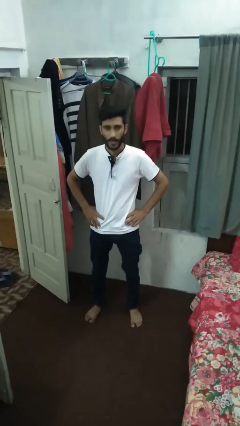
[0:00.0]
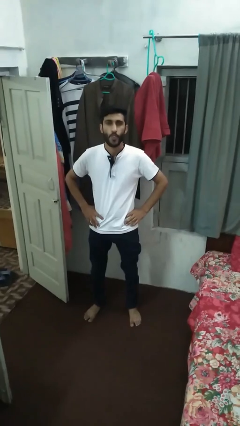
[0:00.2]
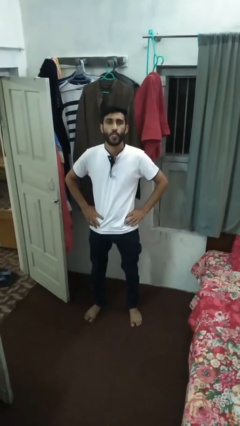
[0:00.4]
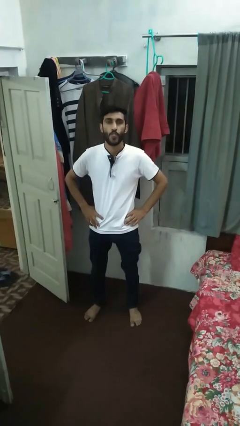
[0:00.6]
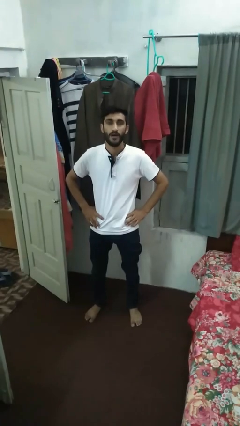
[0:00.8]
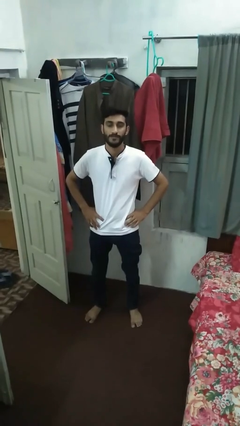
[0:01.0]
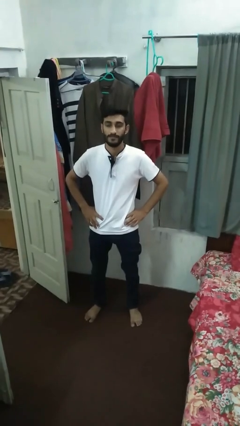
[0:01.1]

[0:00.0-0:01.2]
person sticks out tongue

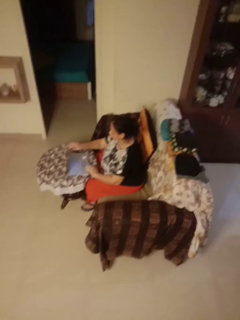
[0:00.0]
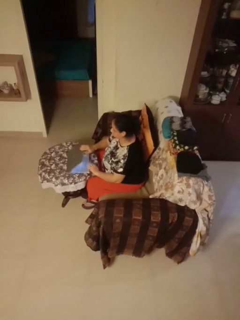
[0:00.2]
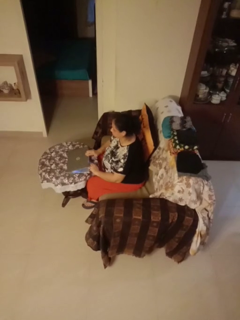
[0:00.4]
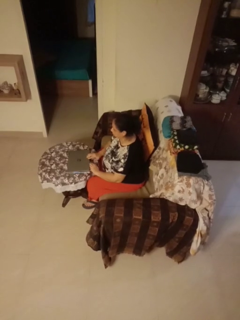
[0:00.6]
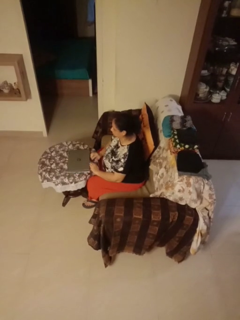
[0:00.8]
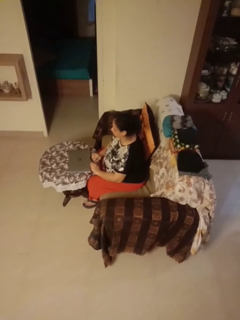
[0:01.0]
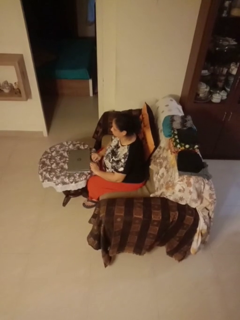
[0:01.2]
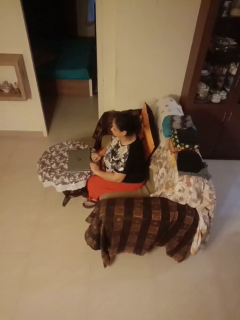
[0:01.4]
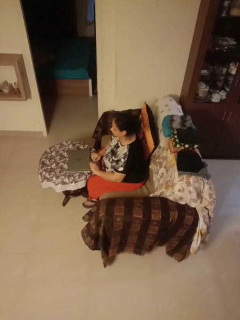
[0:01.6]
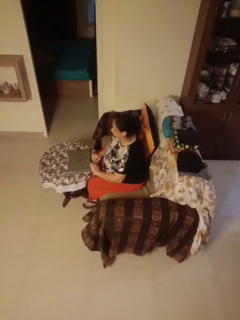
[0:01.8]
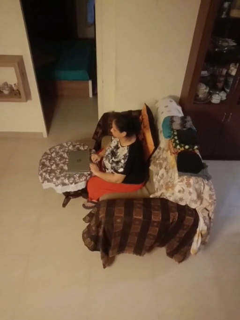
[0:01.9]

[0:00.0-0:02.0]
person closes laptop

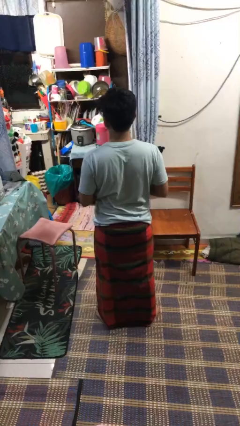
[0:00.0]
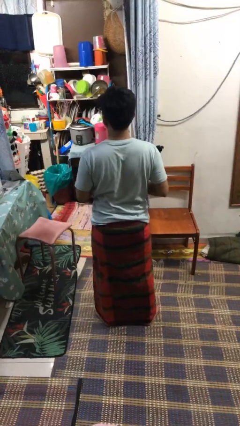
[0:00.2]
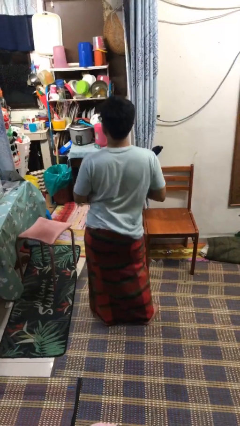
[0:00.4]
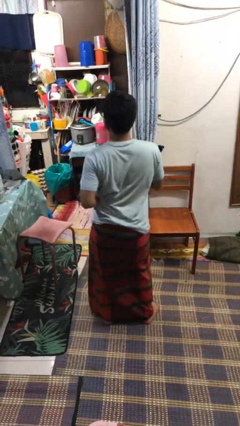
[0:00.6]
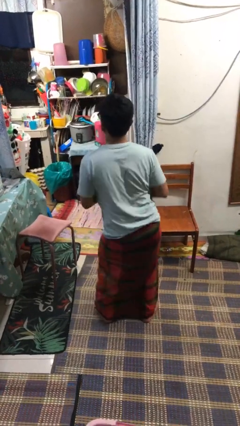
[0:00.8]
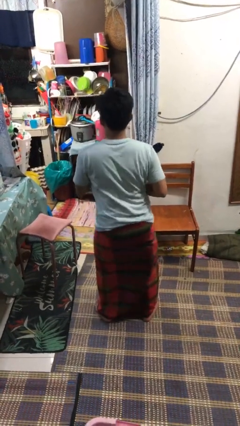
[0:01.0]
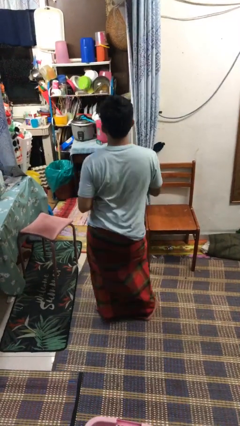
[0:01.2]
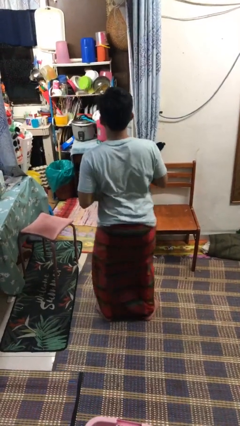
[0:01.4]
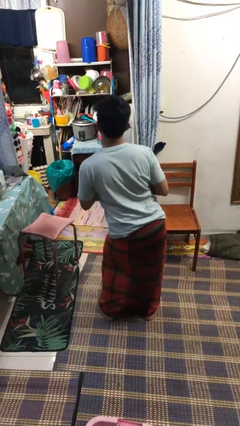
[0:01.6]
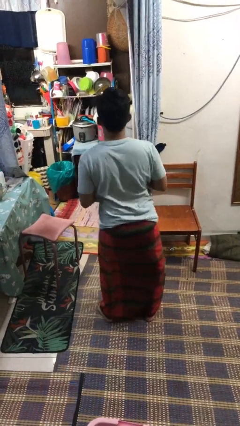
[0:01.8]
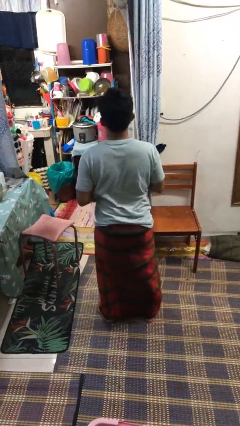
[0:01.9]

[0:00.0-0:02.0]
person wiggles hips

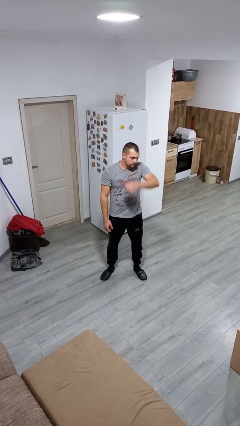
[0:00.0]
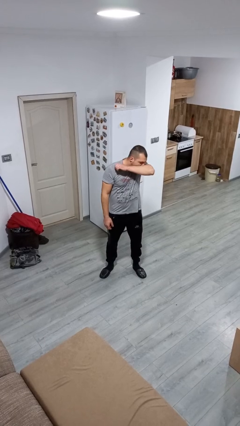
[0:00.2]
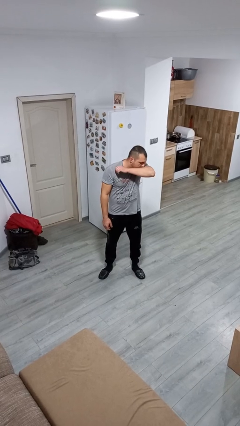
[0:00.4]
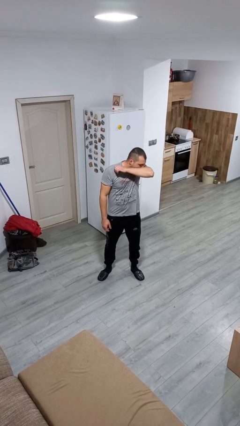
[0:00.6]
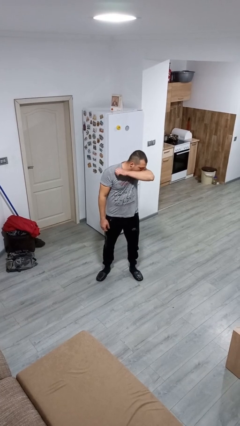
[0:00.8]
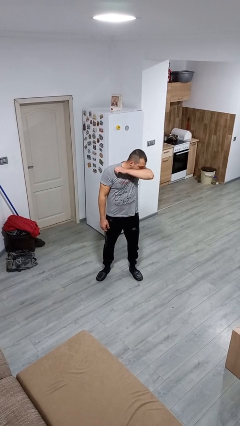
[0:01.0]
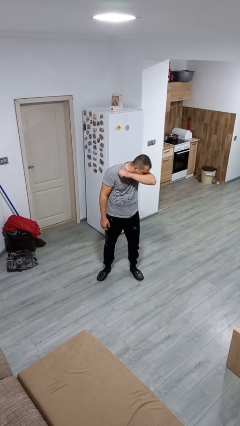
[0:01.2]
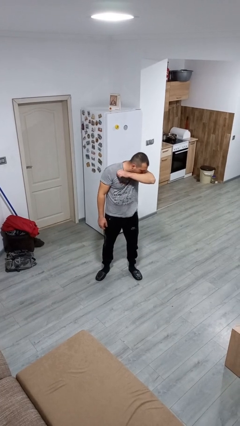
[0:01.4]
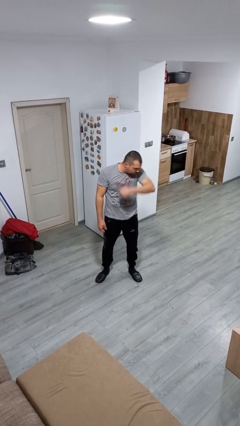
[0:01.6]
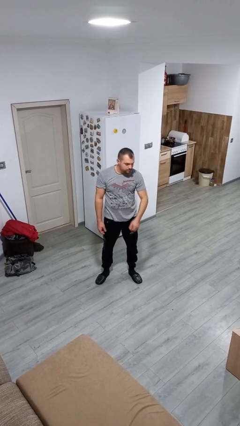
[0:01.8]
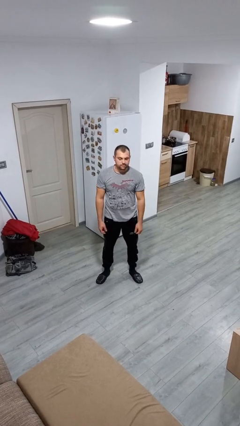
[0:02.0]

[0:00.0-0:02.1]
person sneezes into arm

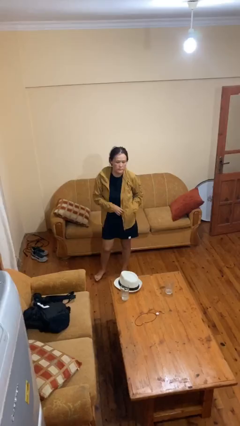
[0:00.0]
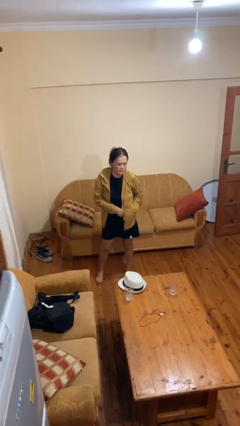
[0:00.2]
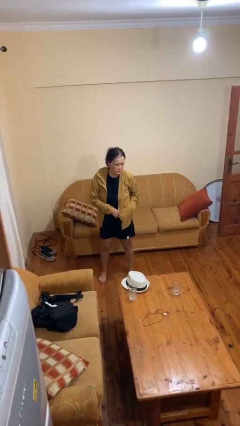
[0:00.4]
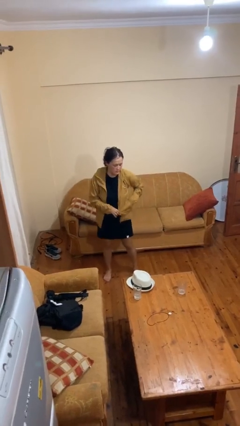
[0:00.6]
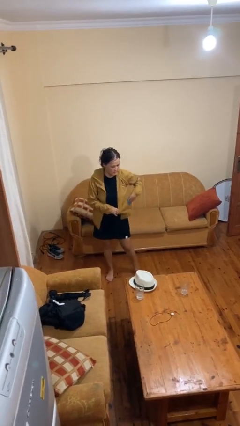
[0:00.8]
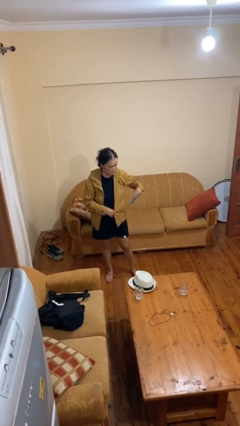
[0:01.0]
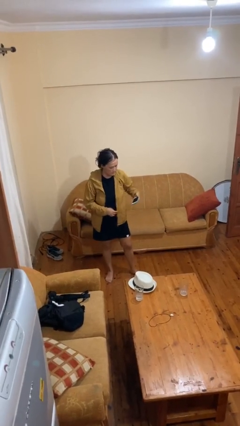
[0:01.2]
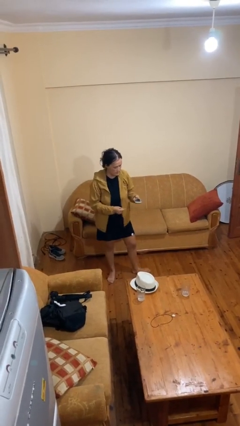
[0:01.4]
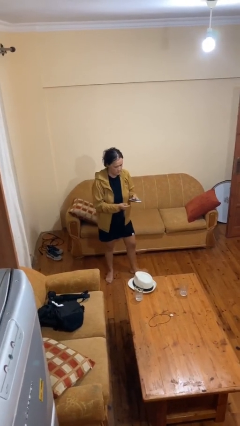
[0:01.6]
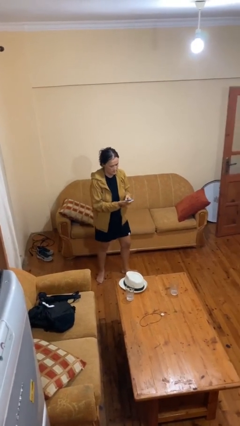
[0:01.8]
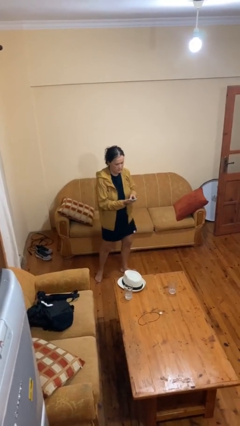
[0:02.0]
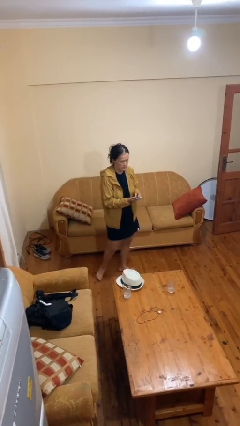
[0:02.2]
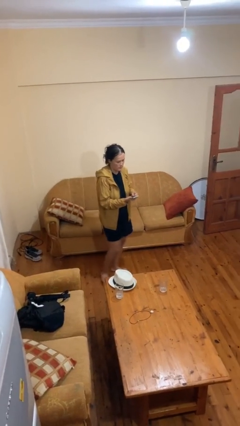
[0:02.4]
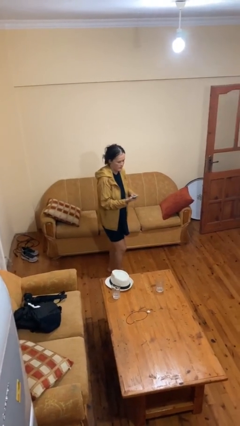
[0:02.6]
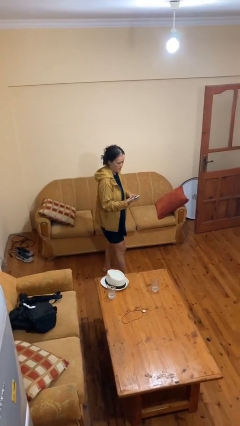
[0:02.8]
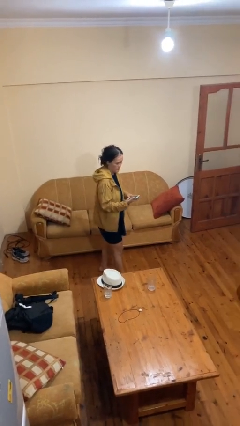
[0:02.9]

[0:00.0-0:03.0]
person takes phone from pocket

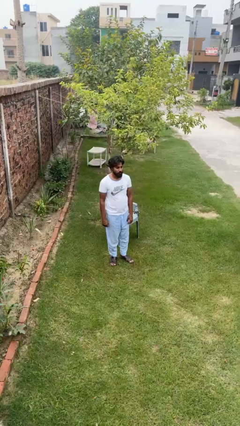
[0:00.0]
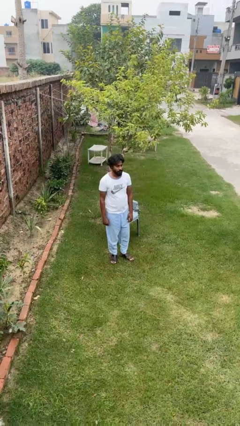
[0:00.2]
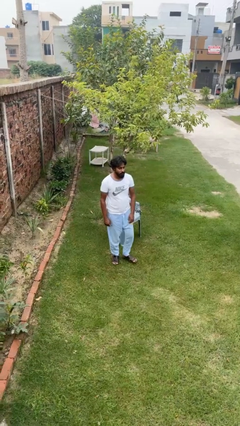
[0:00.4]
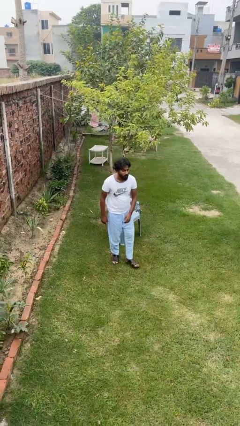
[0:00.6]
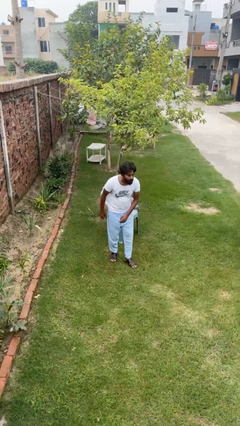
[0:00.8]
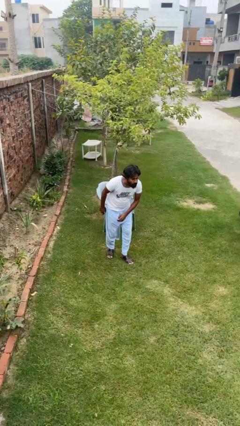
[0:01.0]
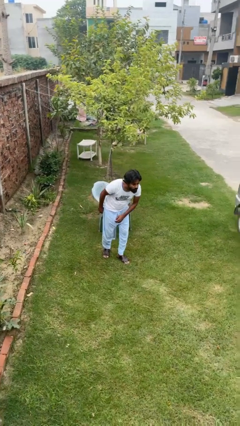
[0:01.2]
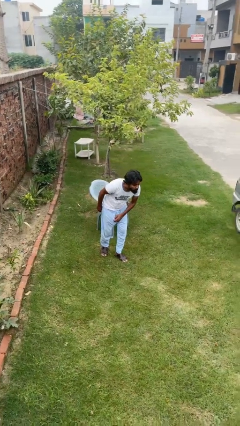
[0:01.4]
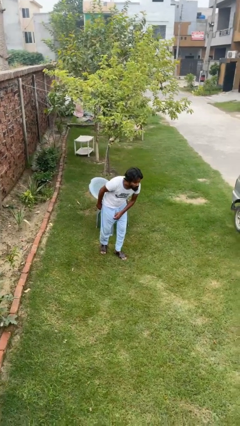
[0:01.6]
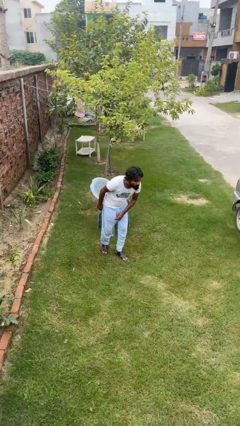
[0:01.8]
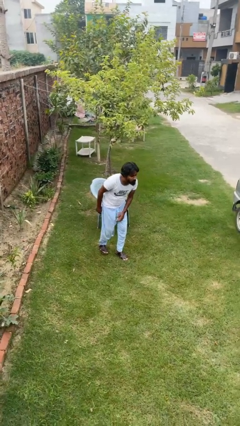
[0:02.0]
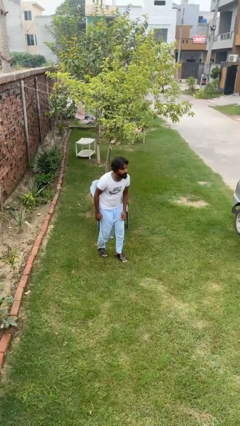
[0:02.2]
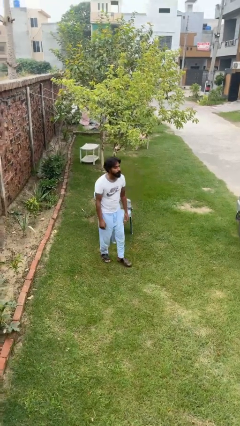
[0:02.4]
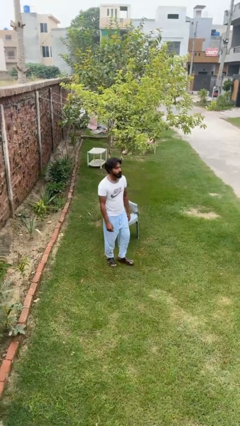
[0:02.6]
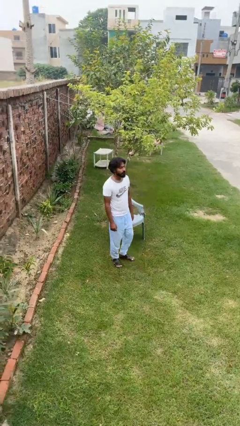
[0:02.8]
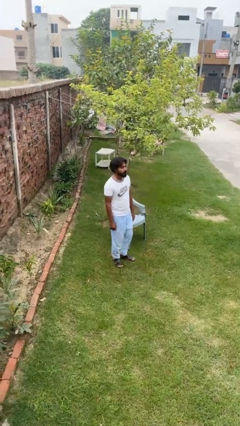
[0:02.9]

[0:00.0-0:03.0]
person bows

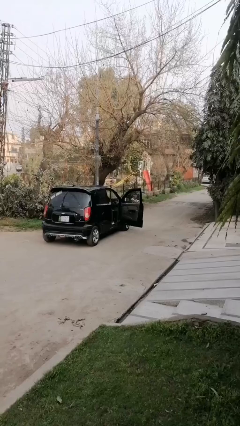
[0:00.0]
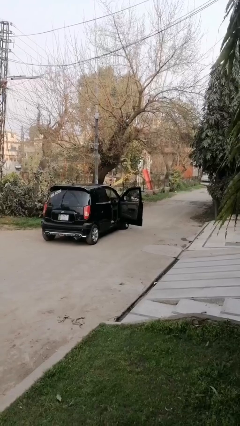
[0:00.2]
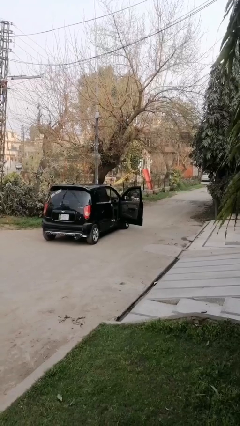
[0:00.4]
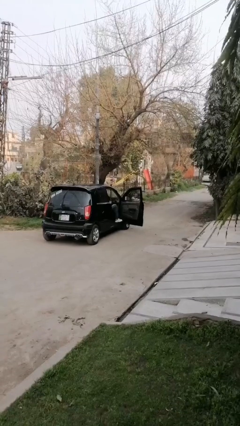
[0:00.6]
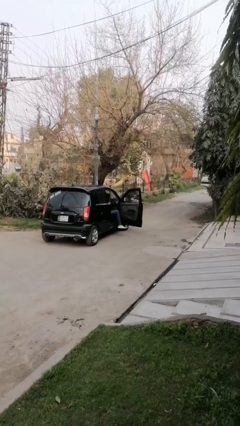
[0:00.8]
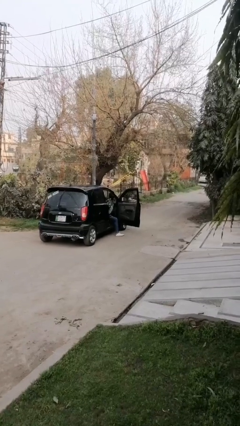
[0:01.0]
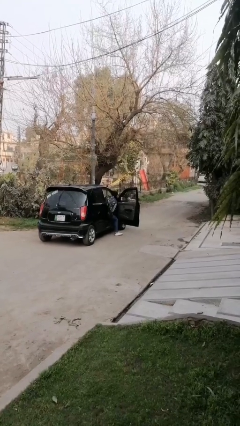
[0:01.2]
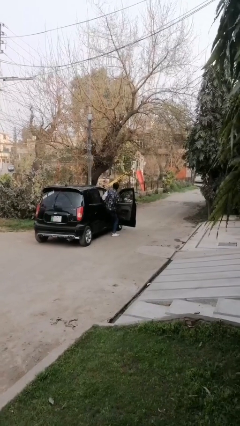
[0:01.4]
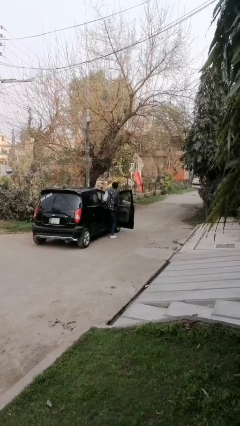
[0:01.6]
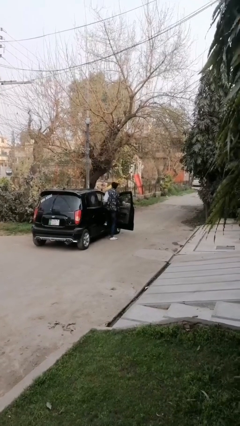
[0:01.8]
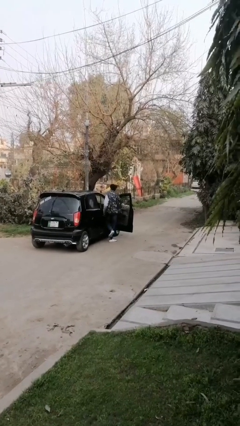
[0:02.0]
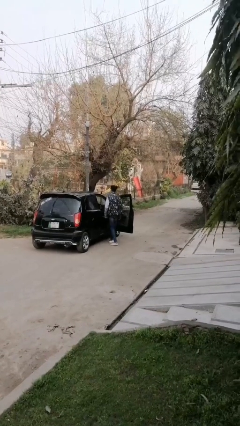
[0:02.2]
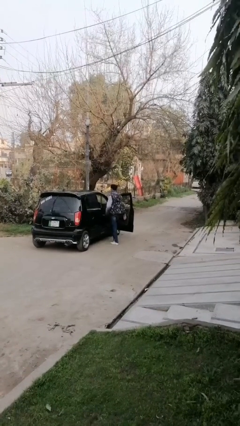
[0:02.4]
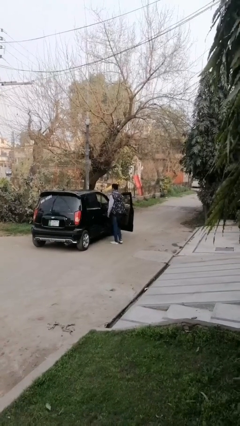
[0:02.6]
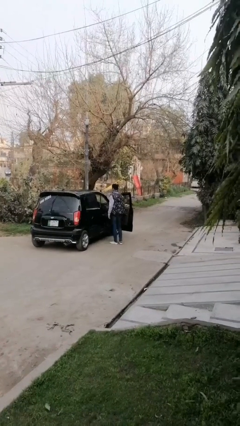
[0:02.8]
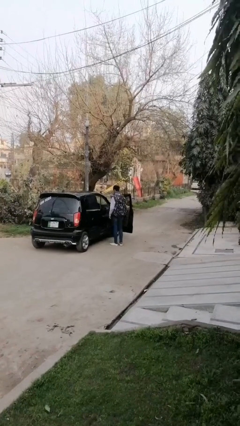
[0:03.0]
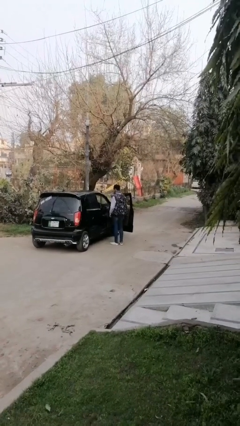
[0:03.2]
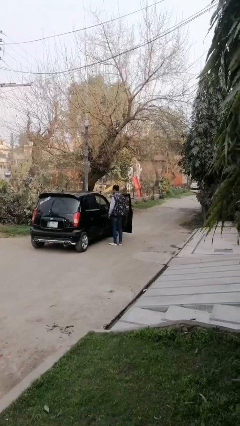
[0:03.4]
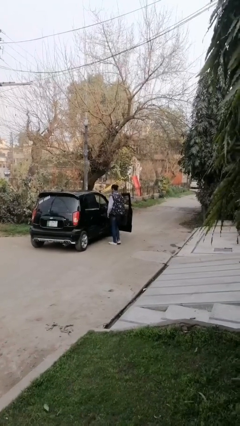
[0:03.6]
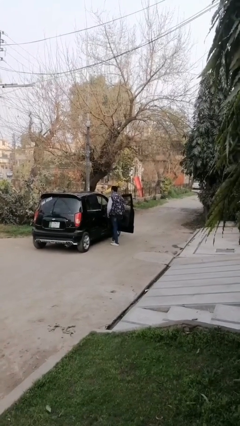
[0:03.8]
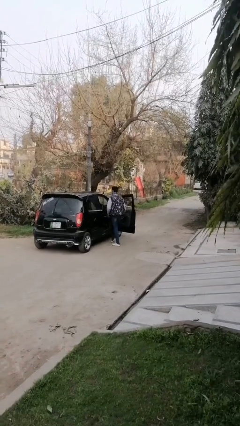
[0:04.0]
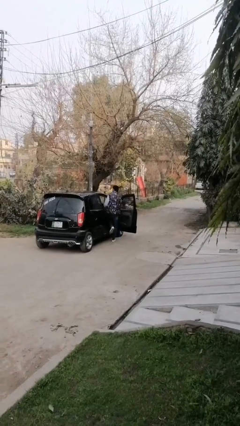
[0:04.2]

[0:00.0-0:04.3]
person enters car

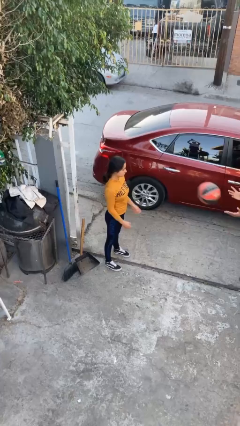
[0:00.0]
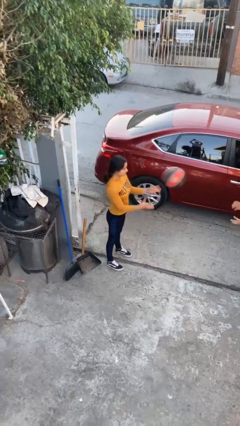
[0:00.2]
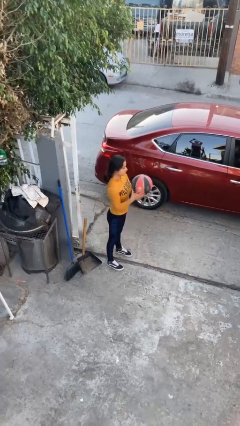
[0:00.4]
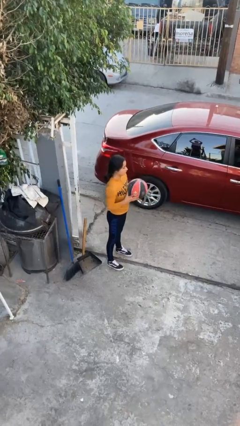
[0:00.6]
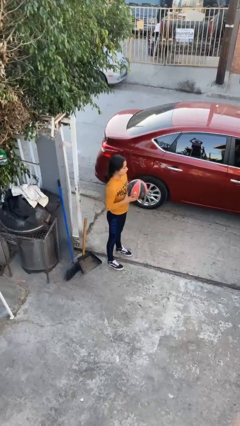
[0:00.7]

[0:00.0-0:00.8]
person catches object from person
